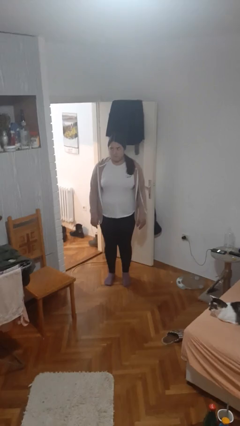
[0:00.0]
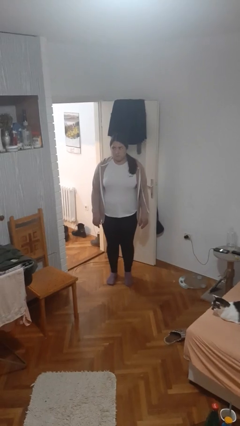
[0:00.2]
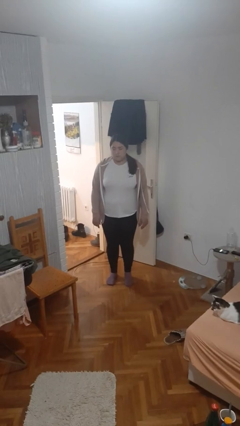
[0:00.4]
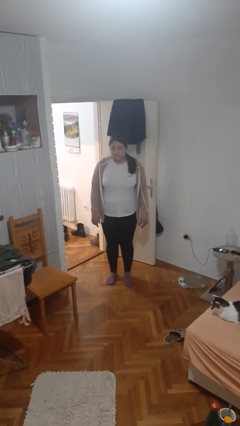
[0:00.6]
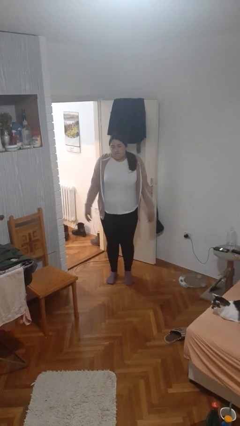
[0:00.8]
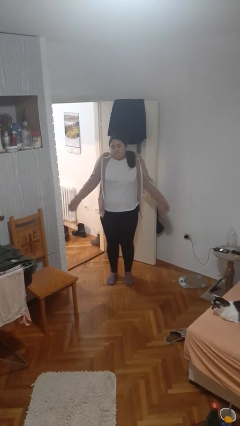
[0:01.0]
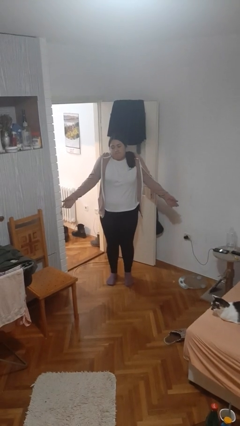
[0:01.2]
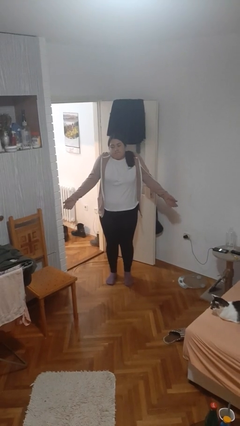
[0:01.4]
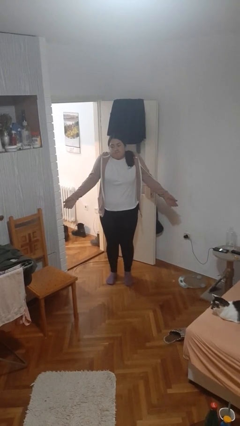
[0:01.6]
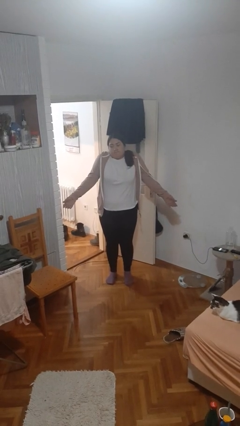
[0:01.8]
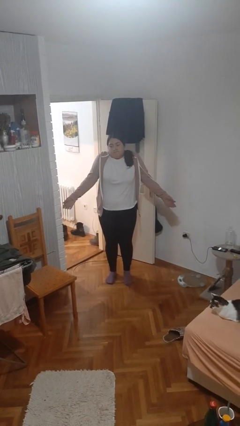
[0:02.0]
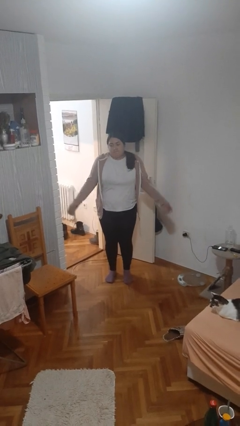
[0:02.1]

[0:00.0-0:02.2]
person shrugs

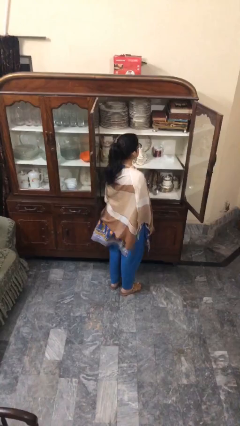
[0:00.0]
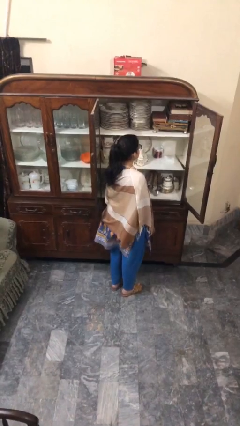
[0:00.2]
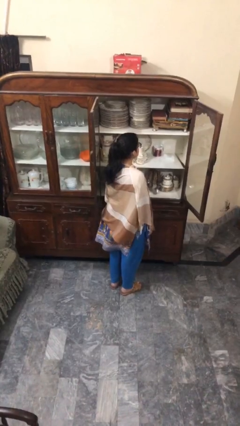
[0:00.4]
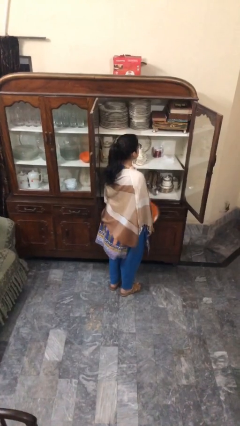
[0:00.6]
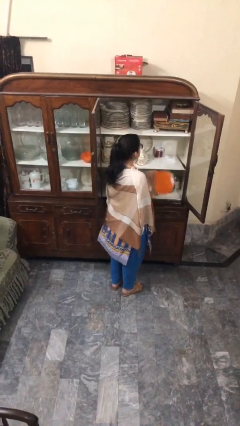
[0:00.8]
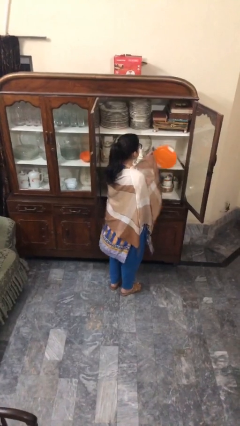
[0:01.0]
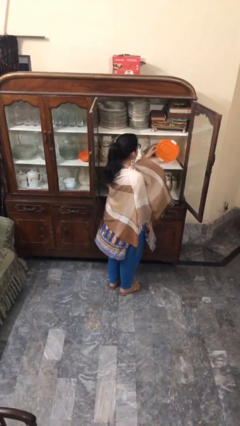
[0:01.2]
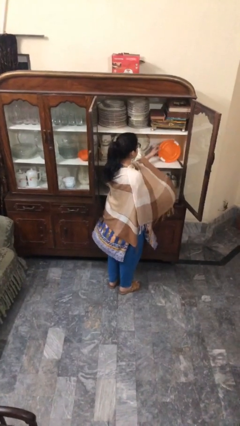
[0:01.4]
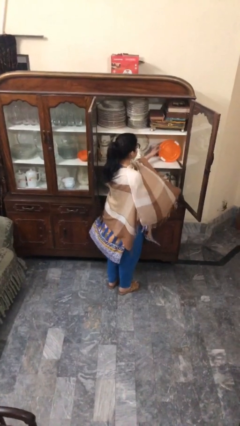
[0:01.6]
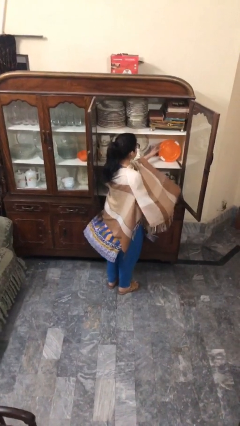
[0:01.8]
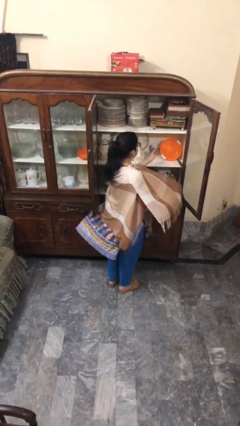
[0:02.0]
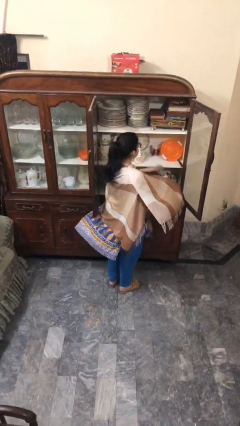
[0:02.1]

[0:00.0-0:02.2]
person puts object in cabinet

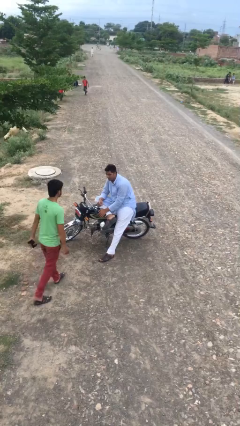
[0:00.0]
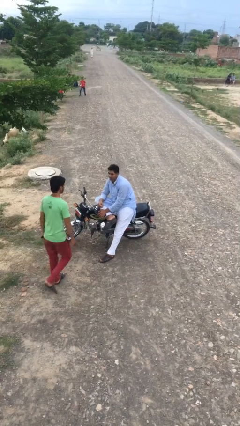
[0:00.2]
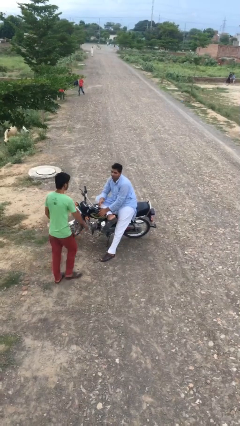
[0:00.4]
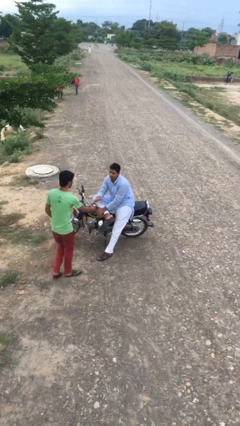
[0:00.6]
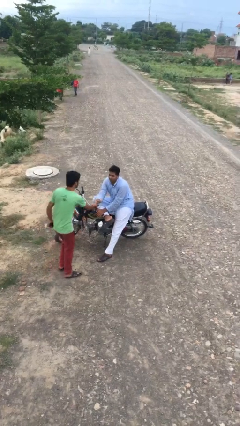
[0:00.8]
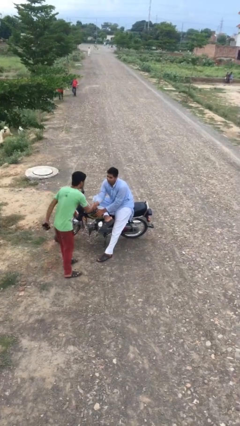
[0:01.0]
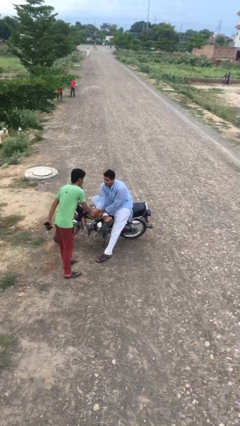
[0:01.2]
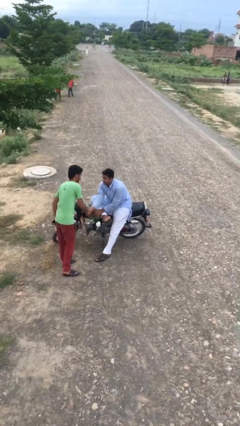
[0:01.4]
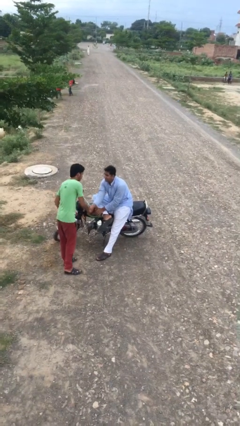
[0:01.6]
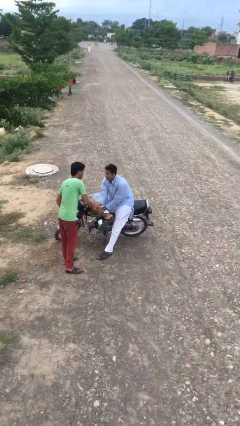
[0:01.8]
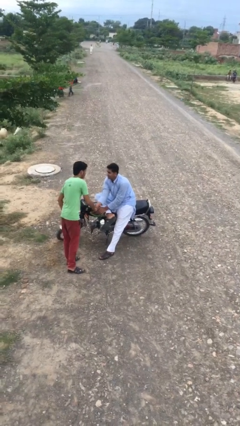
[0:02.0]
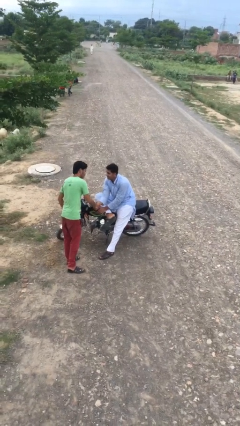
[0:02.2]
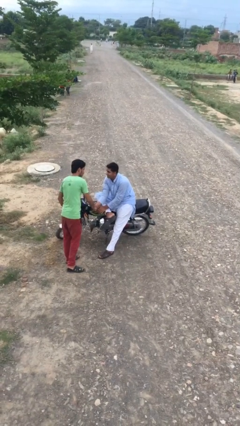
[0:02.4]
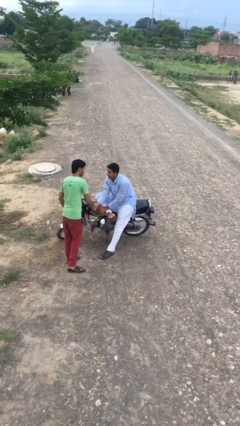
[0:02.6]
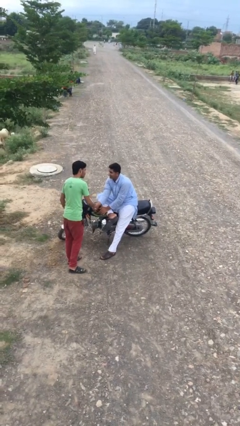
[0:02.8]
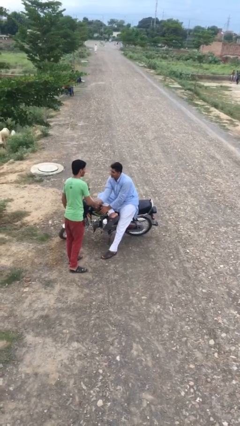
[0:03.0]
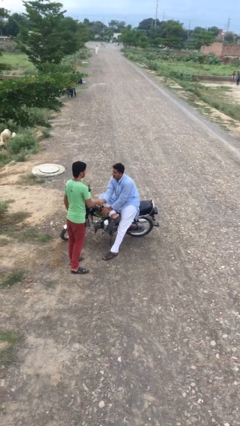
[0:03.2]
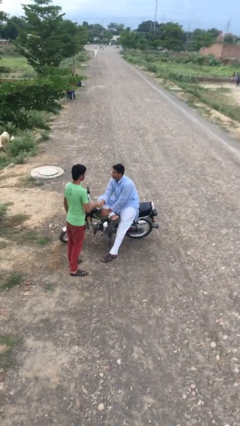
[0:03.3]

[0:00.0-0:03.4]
person shakes hand

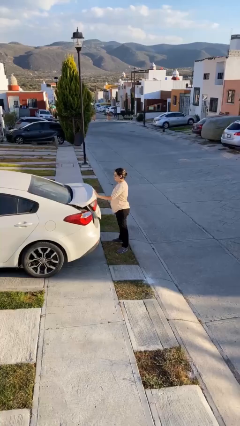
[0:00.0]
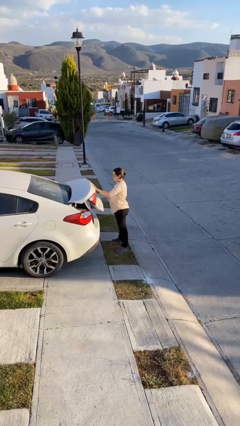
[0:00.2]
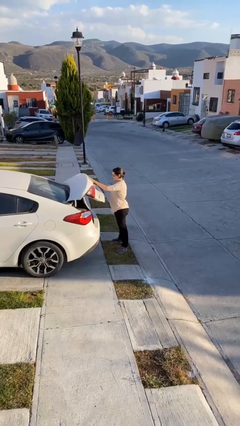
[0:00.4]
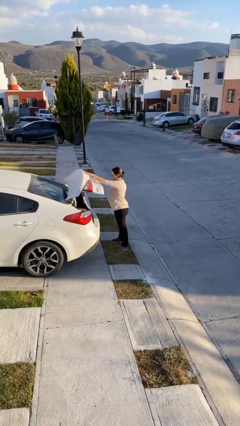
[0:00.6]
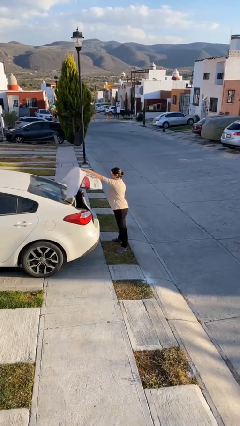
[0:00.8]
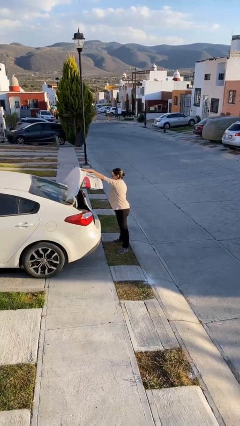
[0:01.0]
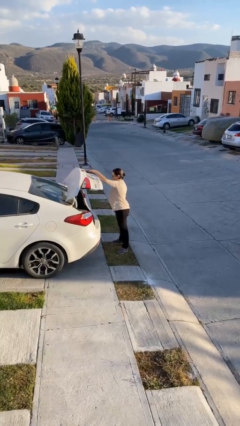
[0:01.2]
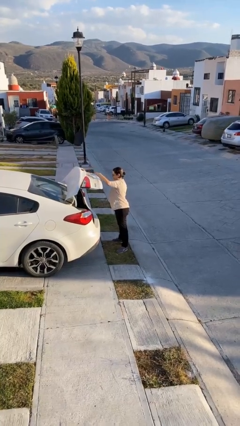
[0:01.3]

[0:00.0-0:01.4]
person opens car trunk

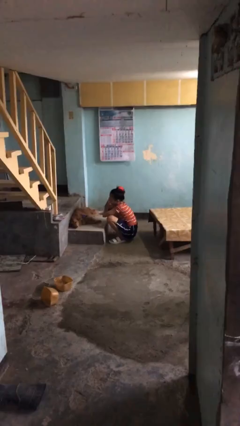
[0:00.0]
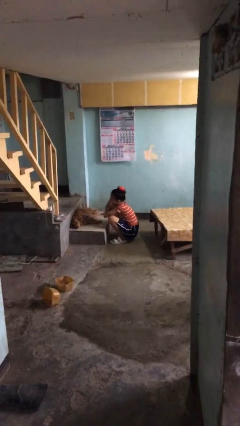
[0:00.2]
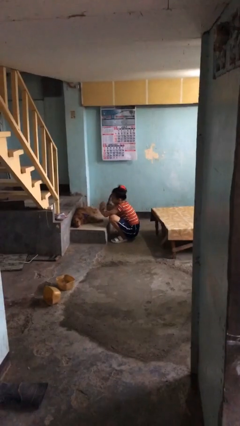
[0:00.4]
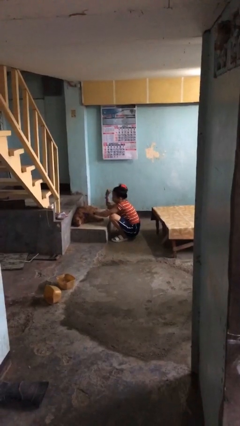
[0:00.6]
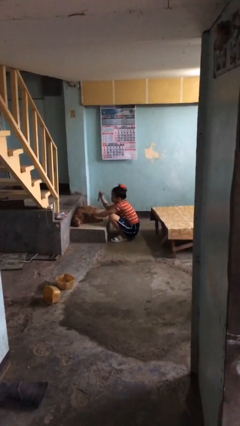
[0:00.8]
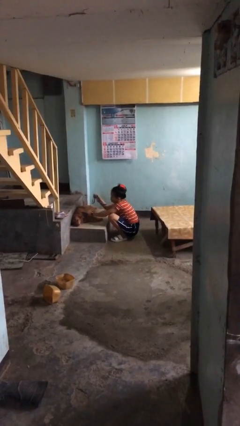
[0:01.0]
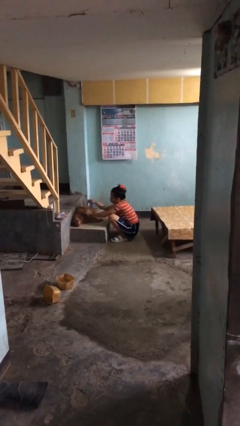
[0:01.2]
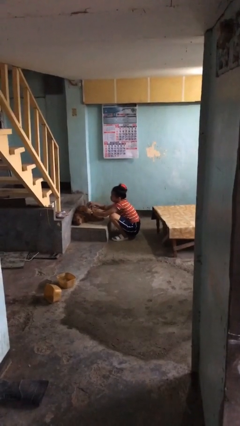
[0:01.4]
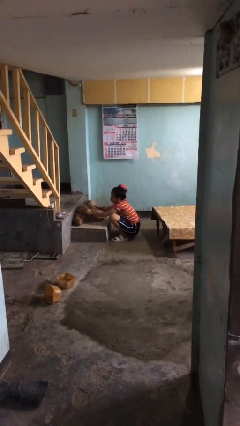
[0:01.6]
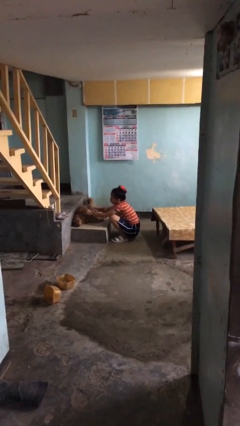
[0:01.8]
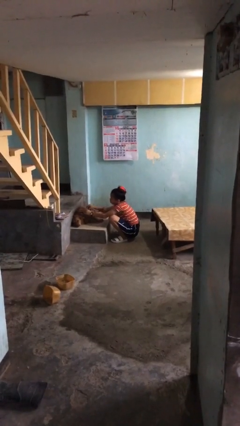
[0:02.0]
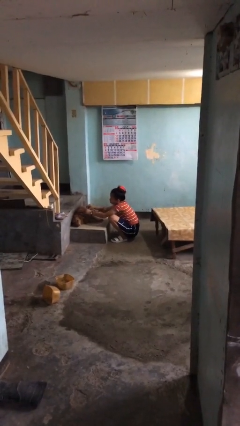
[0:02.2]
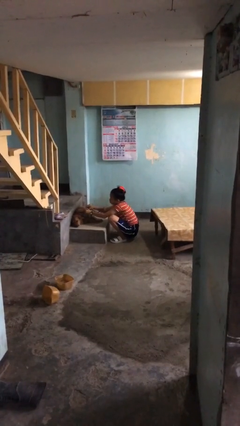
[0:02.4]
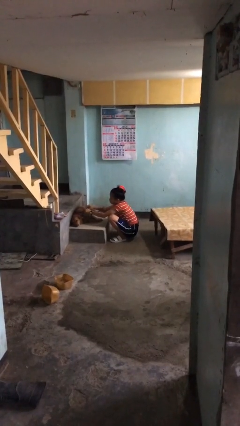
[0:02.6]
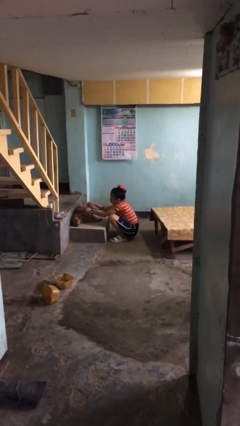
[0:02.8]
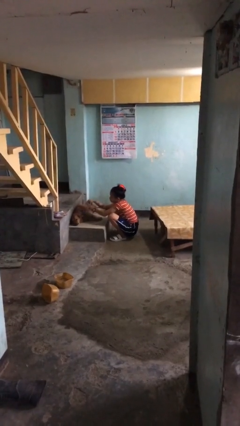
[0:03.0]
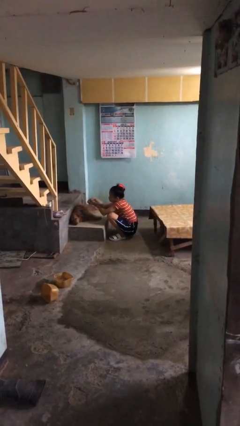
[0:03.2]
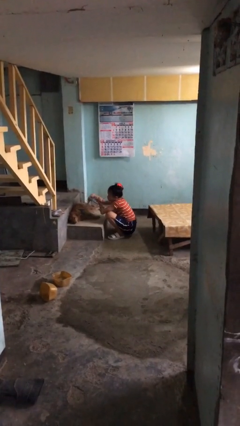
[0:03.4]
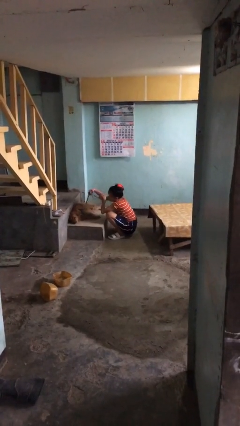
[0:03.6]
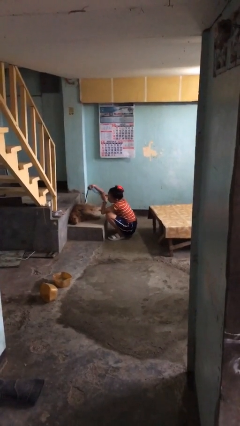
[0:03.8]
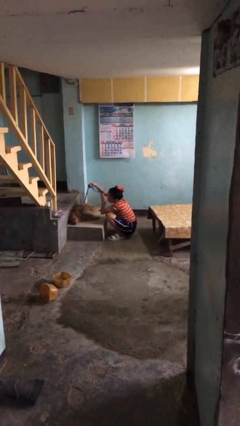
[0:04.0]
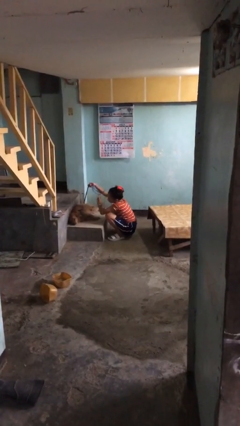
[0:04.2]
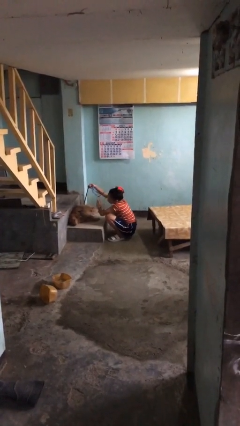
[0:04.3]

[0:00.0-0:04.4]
person attaches leash to dog

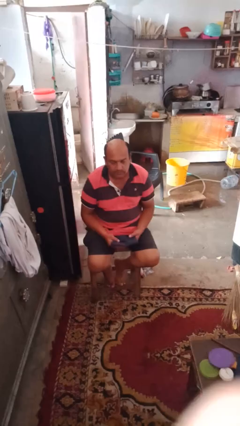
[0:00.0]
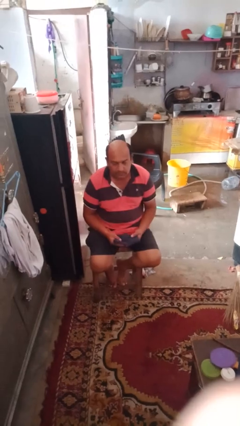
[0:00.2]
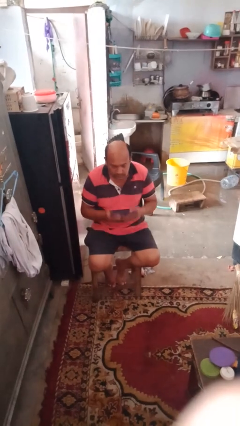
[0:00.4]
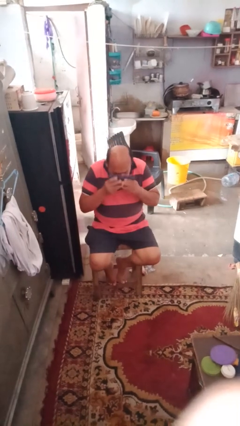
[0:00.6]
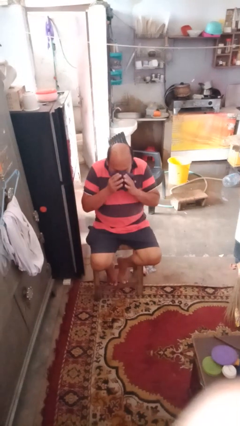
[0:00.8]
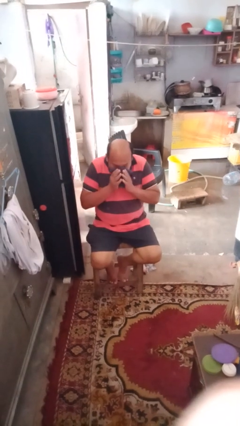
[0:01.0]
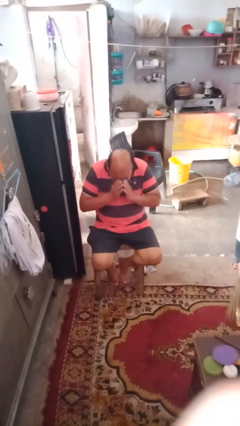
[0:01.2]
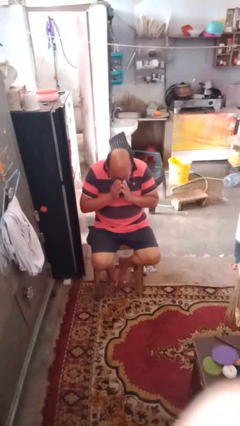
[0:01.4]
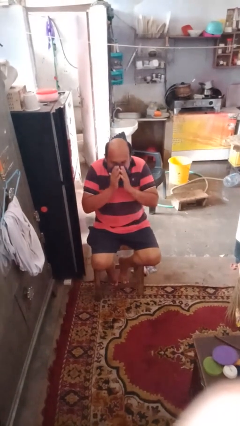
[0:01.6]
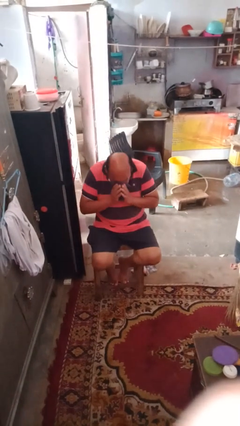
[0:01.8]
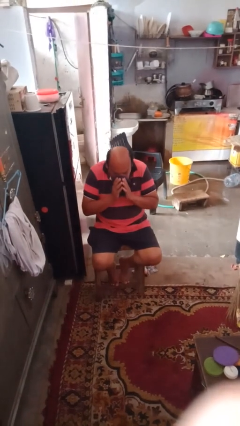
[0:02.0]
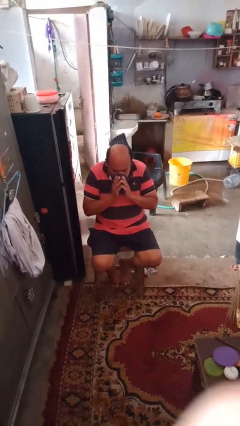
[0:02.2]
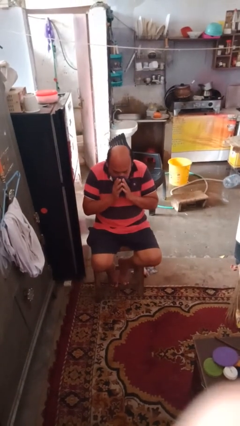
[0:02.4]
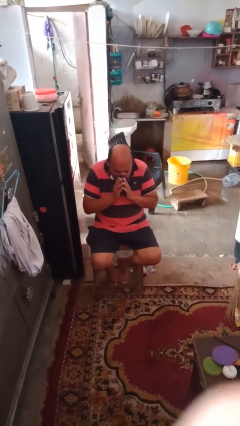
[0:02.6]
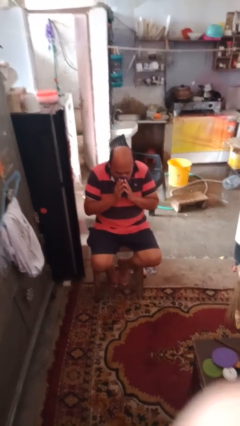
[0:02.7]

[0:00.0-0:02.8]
person blows nose

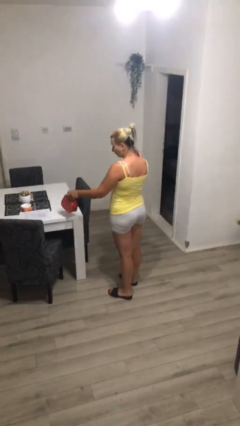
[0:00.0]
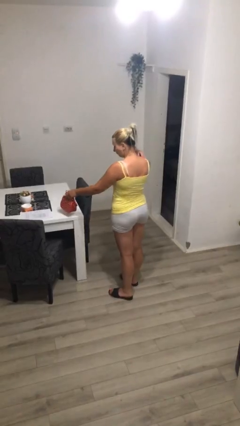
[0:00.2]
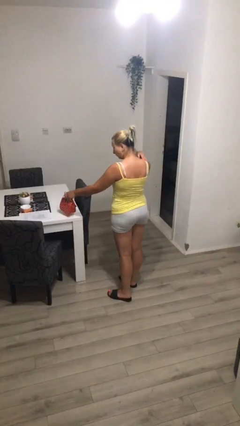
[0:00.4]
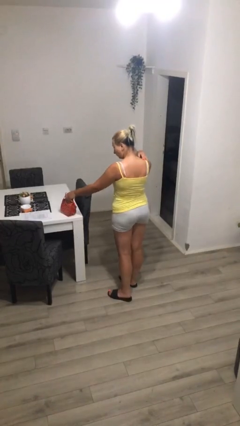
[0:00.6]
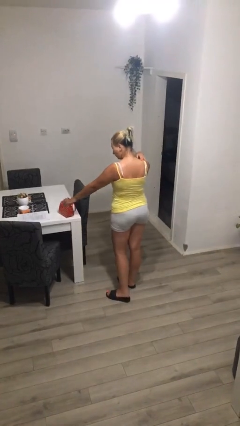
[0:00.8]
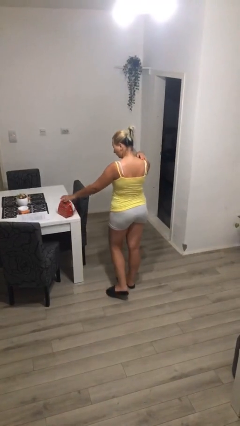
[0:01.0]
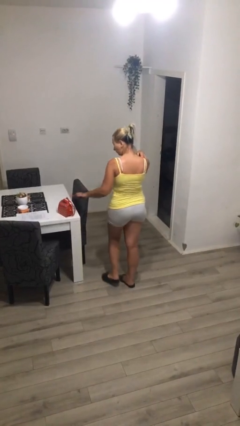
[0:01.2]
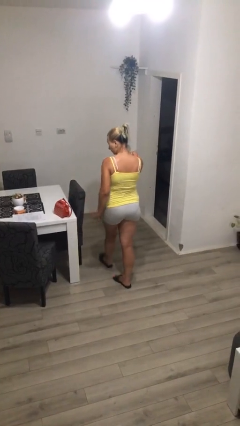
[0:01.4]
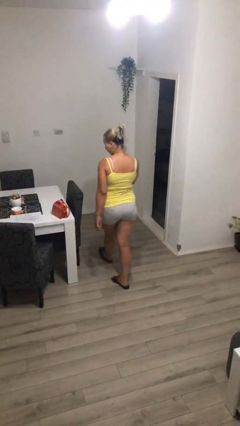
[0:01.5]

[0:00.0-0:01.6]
person puts down object on table
